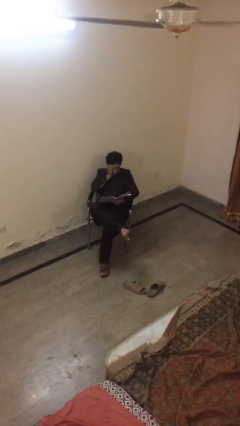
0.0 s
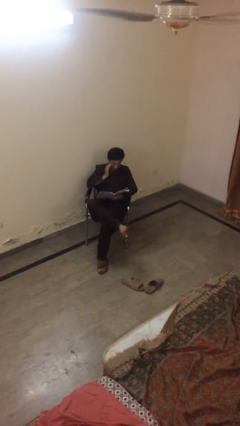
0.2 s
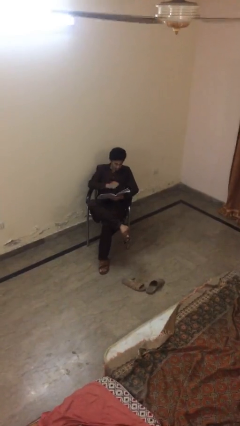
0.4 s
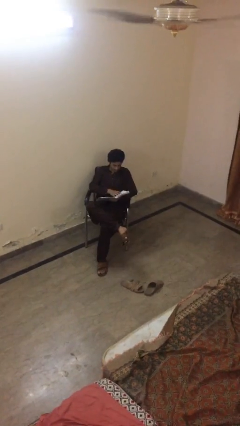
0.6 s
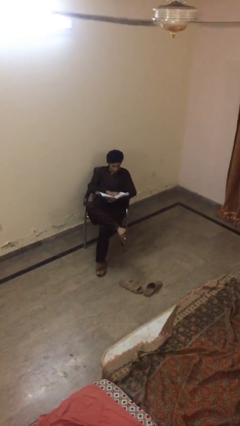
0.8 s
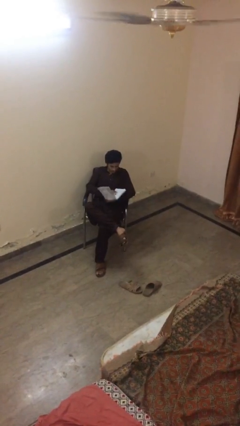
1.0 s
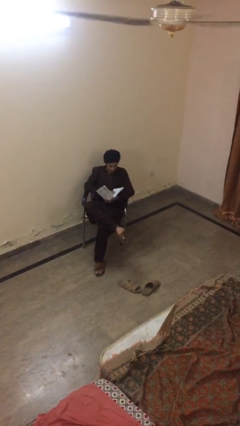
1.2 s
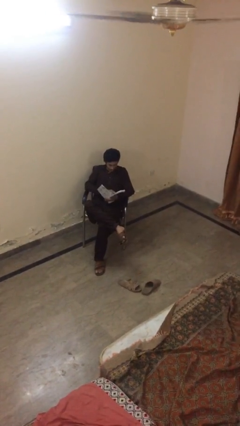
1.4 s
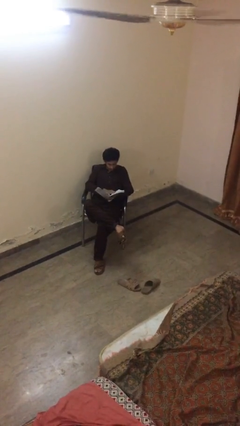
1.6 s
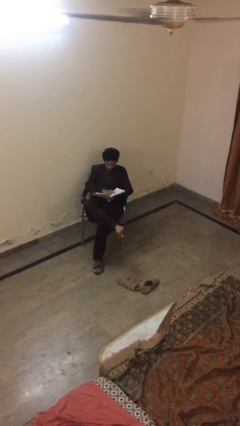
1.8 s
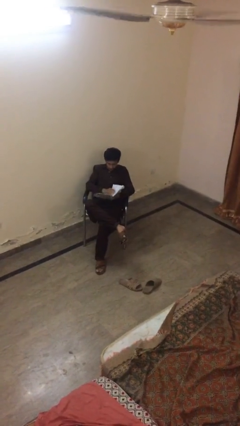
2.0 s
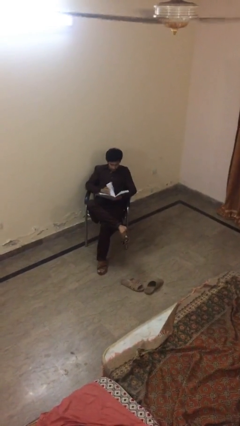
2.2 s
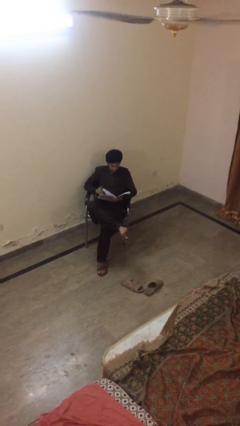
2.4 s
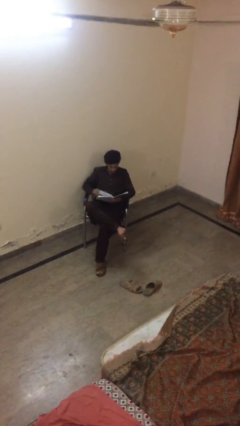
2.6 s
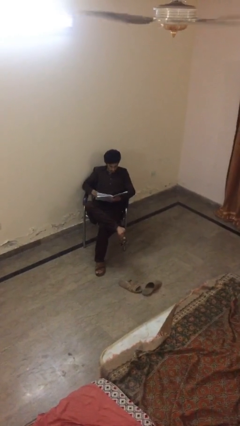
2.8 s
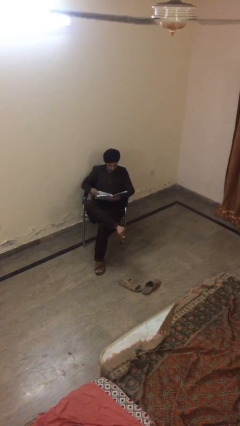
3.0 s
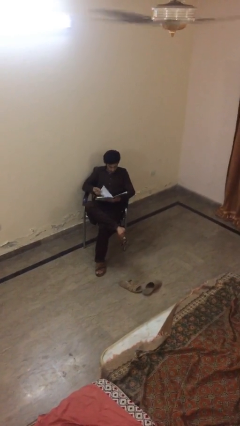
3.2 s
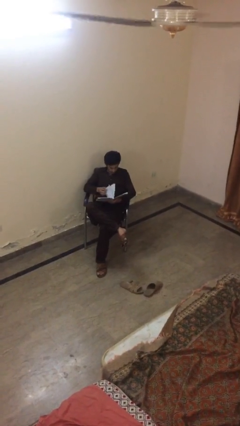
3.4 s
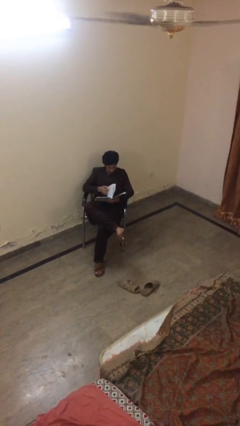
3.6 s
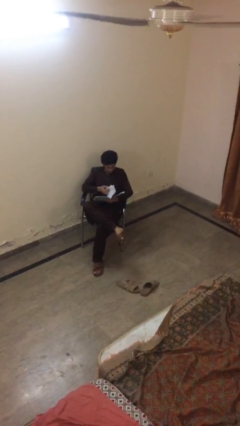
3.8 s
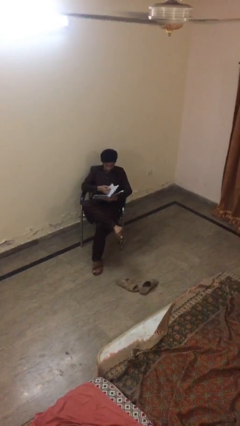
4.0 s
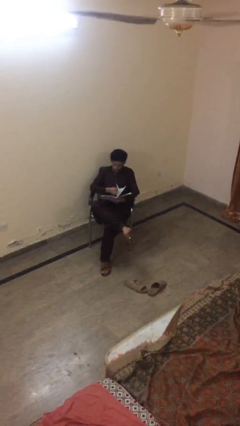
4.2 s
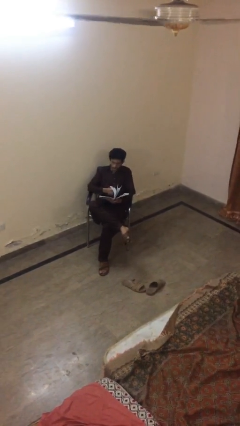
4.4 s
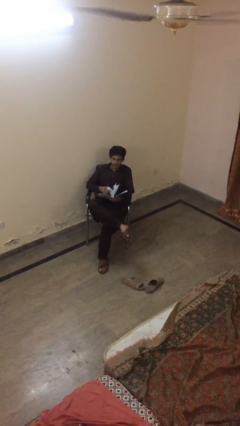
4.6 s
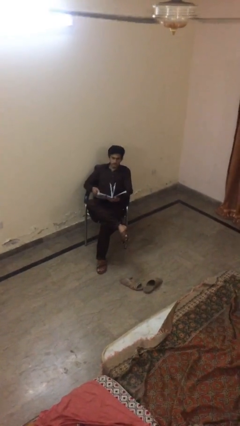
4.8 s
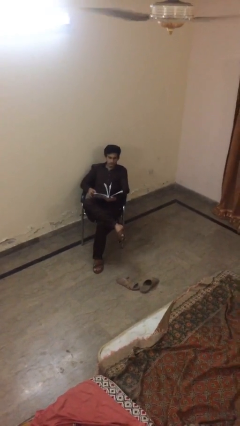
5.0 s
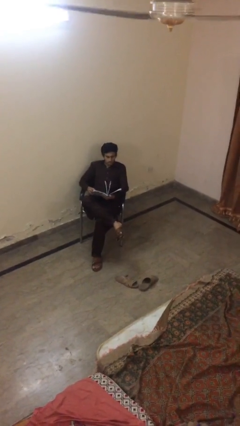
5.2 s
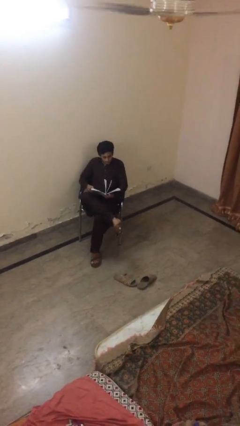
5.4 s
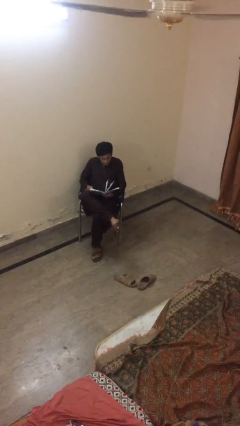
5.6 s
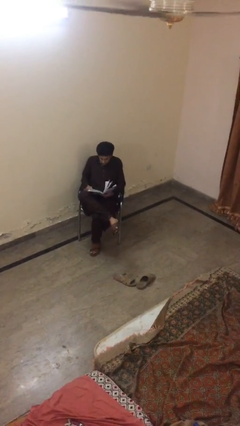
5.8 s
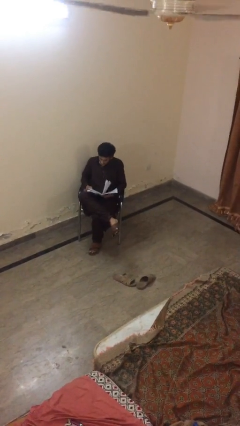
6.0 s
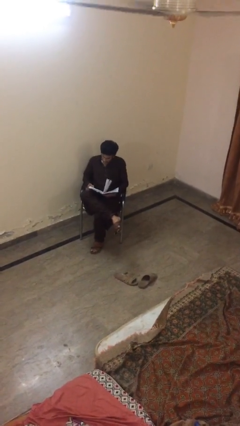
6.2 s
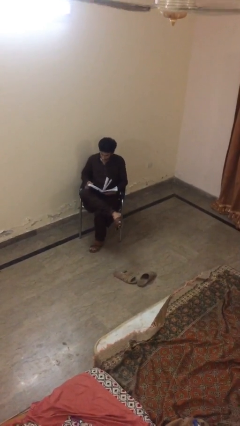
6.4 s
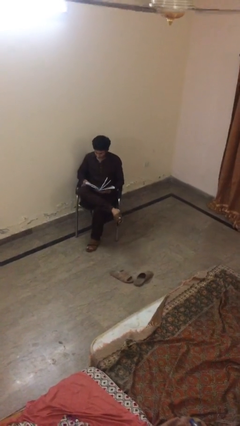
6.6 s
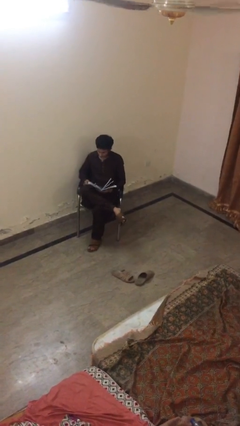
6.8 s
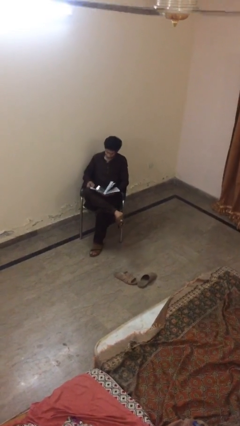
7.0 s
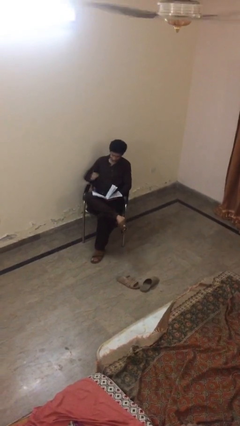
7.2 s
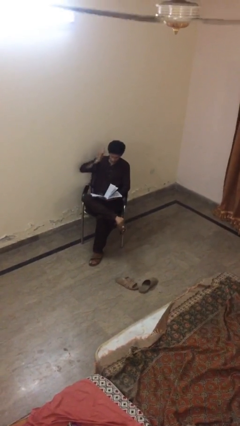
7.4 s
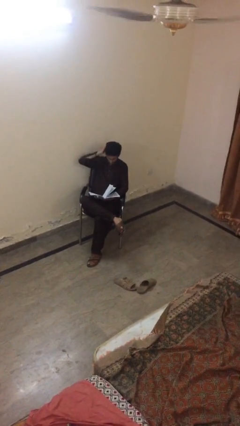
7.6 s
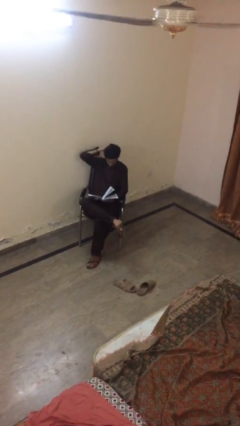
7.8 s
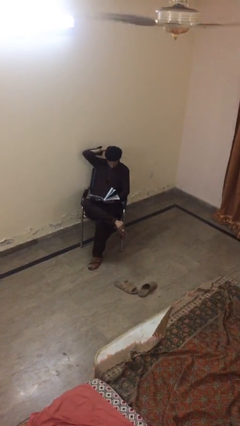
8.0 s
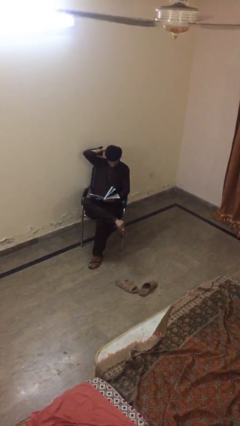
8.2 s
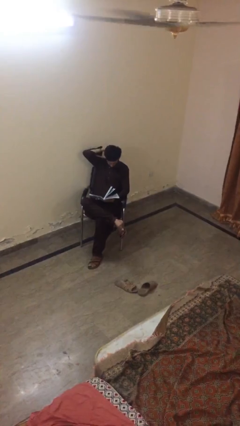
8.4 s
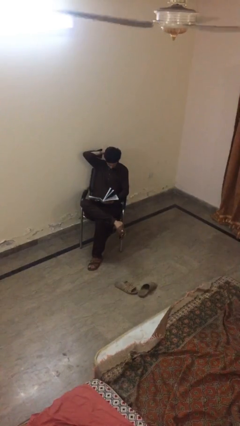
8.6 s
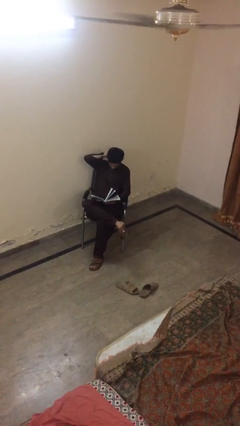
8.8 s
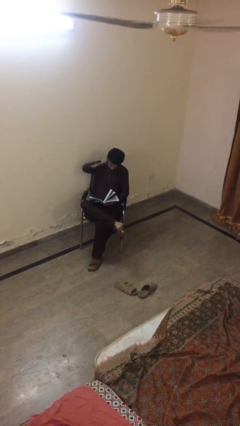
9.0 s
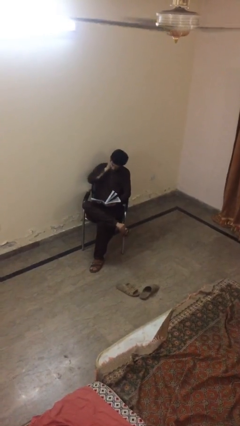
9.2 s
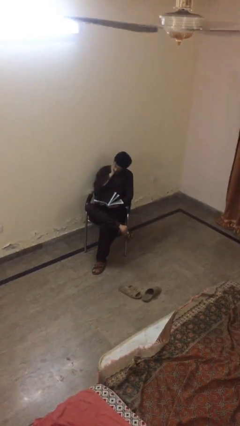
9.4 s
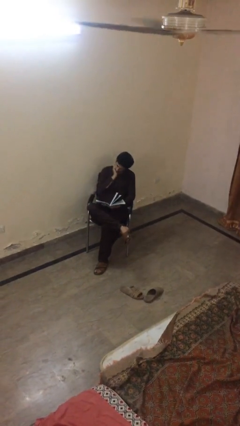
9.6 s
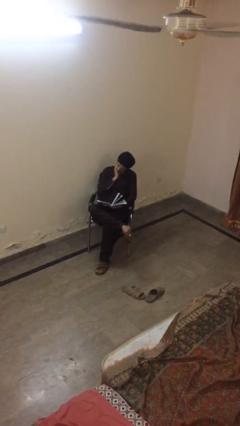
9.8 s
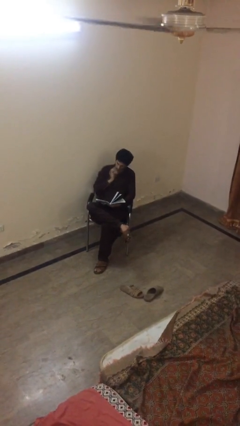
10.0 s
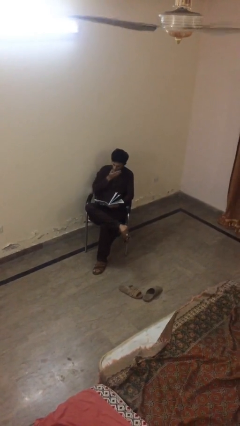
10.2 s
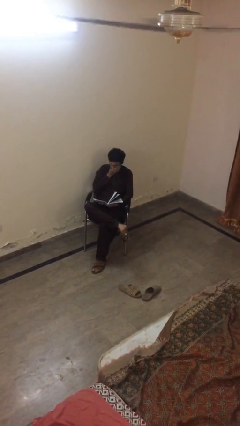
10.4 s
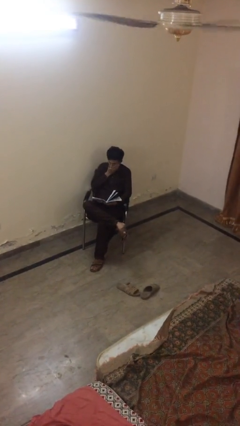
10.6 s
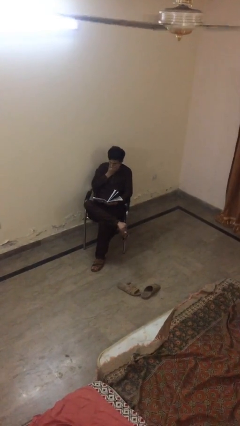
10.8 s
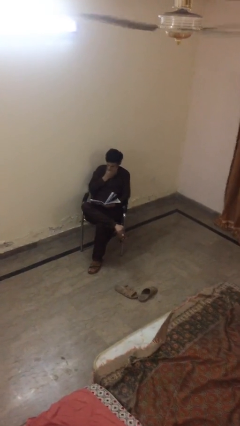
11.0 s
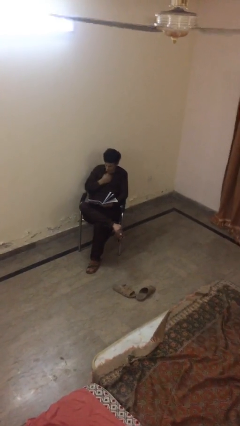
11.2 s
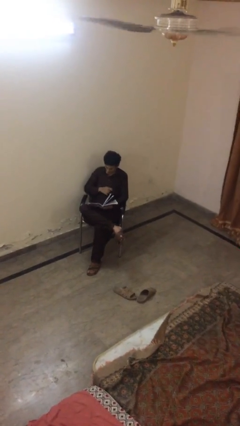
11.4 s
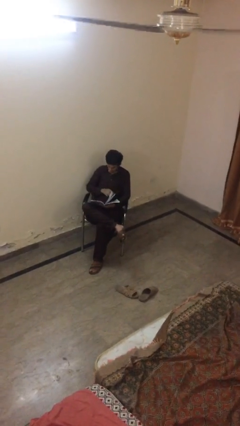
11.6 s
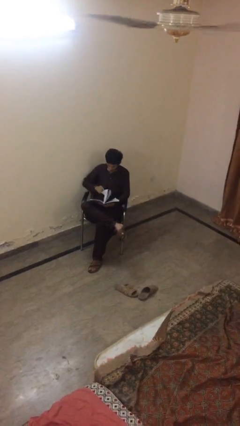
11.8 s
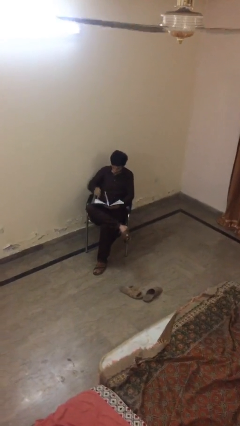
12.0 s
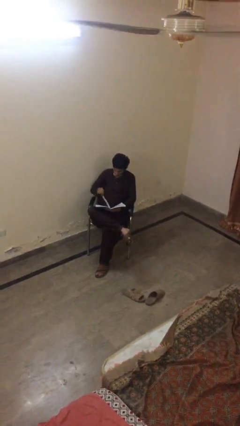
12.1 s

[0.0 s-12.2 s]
person reads document

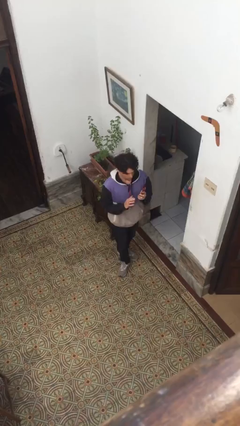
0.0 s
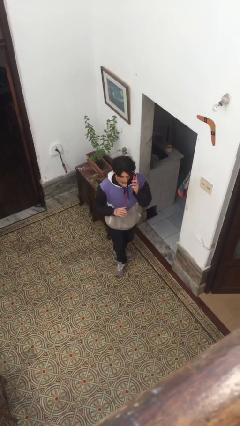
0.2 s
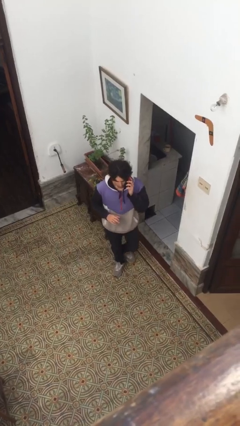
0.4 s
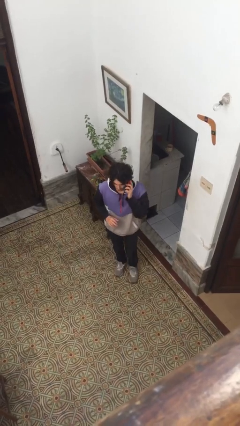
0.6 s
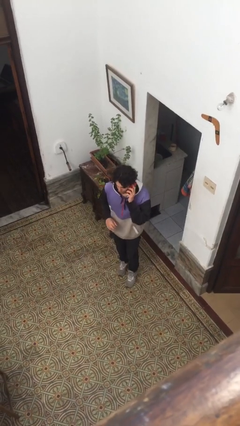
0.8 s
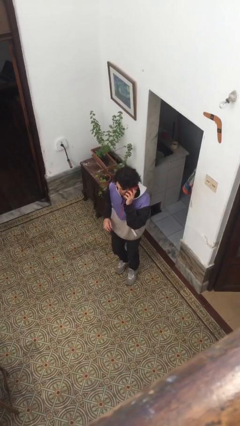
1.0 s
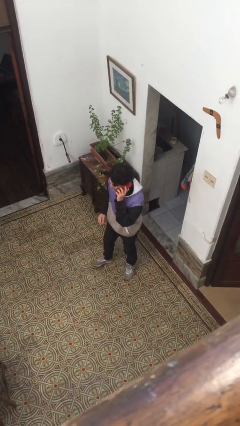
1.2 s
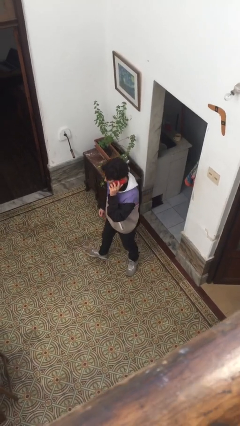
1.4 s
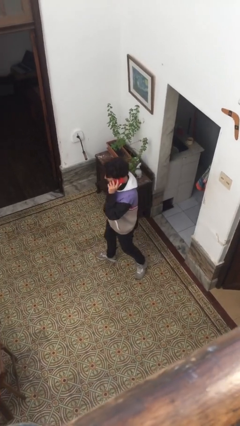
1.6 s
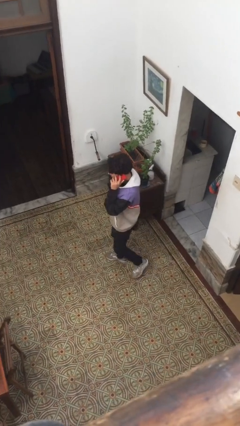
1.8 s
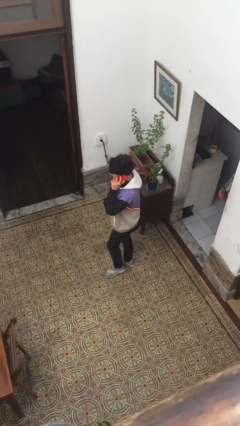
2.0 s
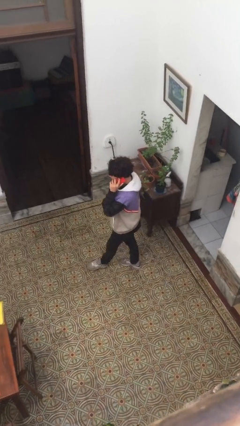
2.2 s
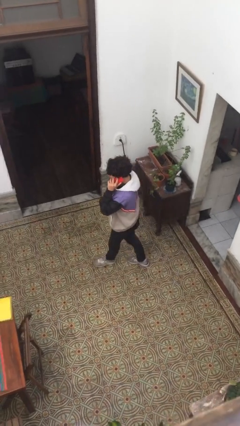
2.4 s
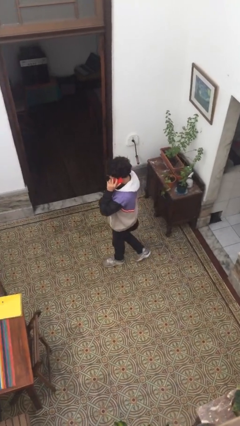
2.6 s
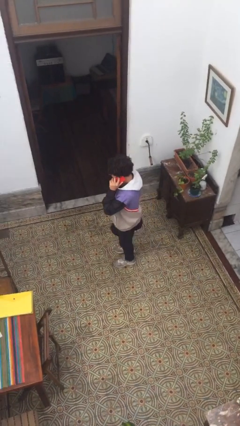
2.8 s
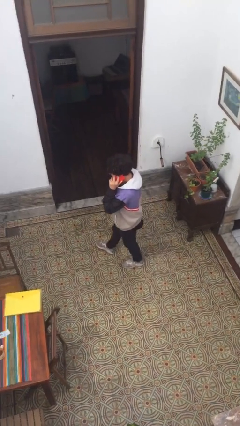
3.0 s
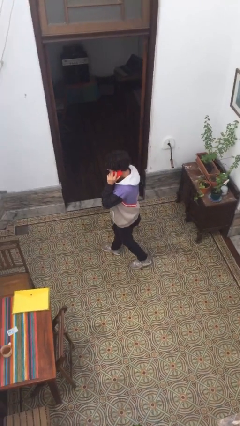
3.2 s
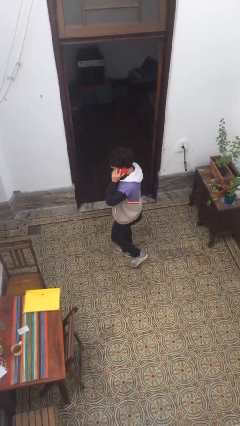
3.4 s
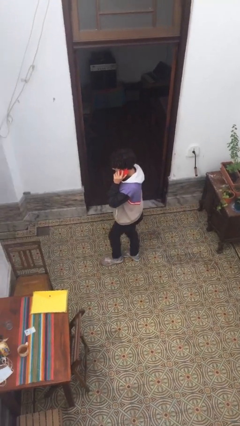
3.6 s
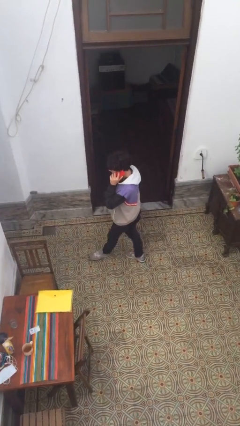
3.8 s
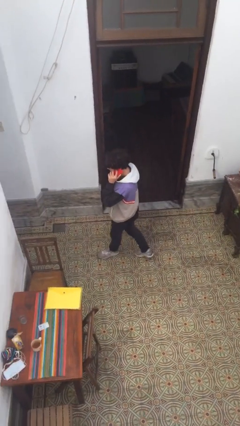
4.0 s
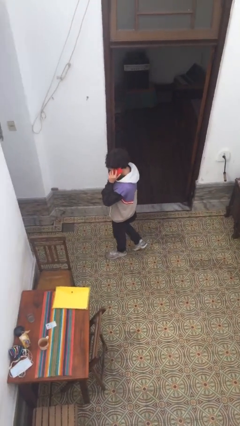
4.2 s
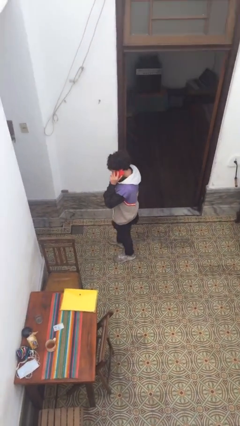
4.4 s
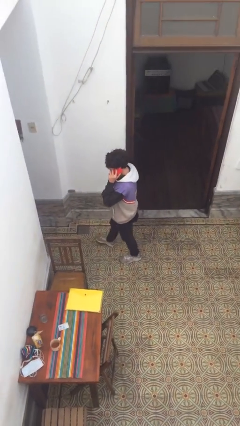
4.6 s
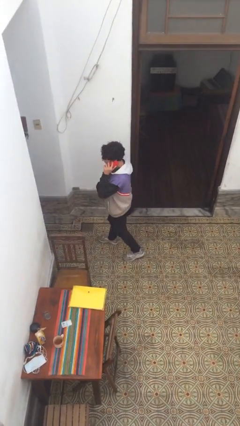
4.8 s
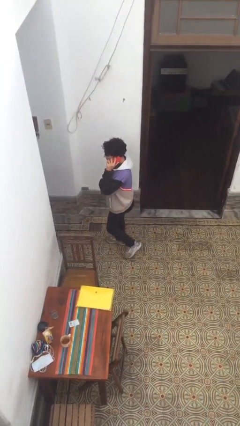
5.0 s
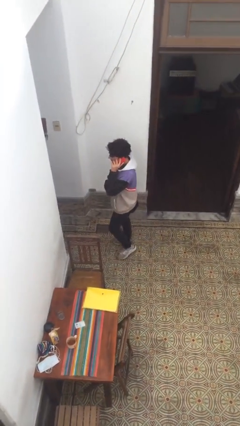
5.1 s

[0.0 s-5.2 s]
person talks on phone

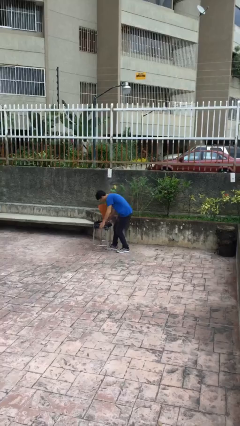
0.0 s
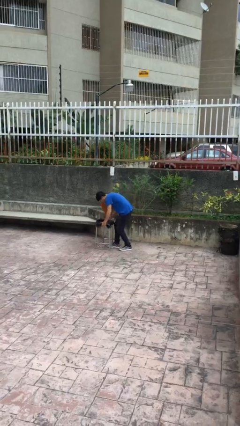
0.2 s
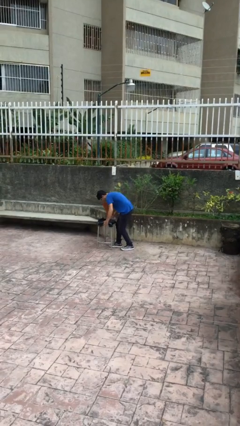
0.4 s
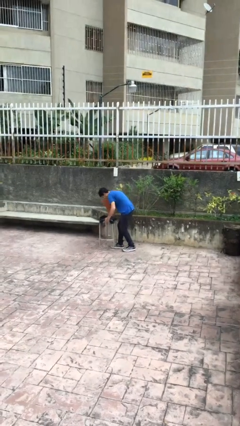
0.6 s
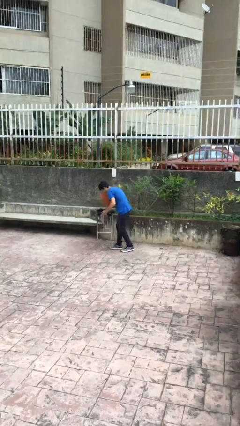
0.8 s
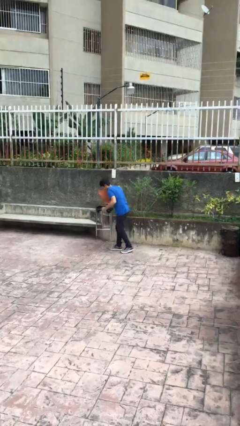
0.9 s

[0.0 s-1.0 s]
person picks up object from floor
